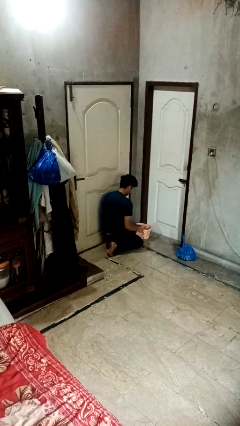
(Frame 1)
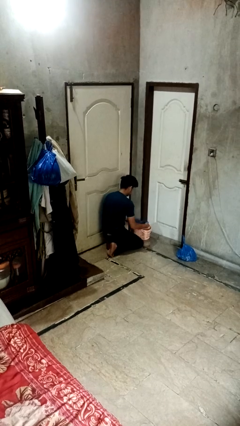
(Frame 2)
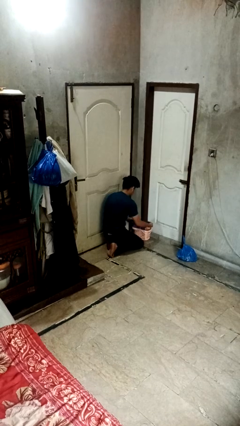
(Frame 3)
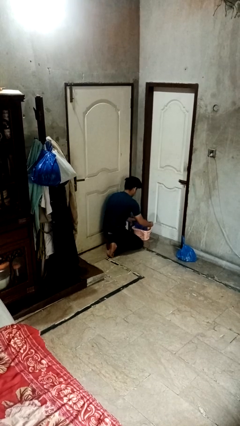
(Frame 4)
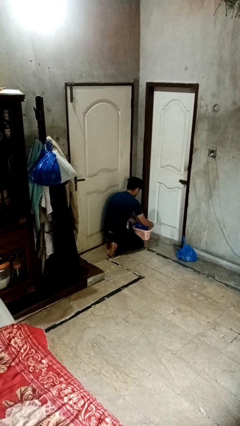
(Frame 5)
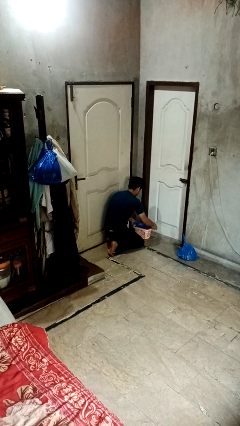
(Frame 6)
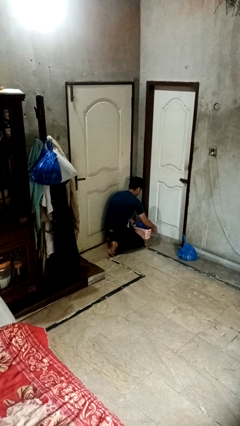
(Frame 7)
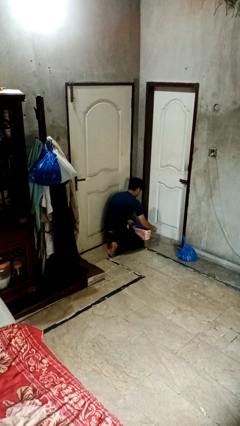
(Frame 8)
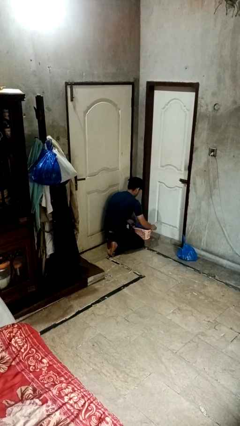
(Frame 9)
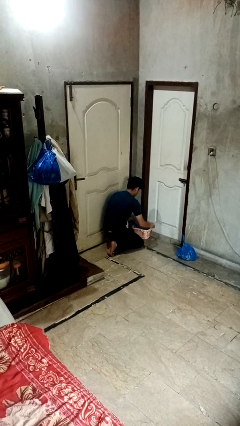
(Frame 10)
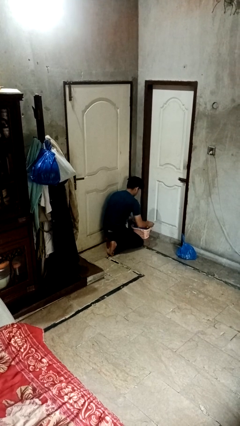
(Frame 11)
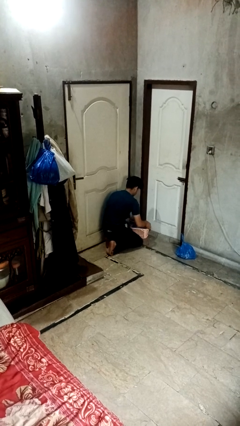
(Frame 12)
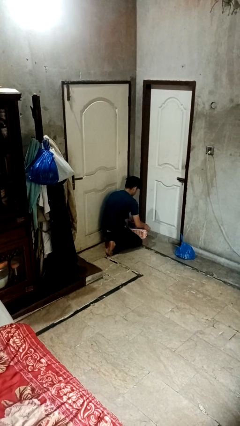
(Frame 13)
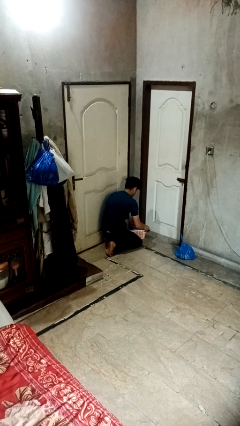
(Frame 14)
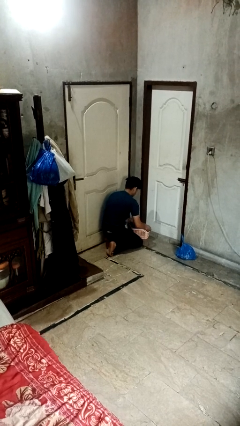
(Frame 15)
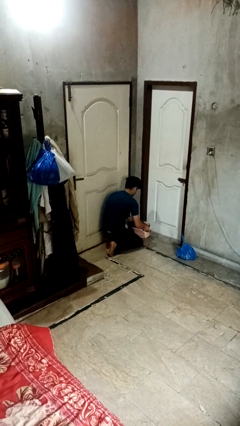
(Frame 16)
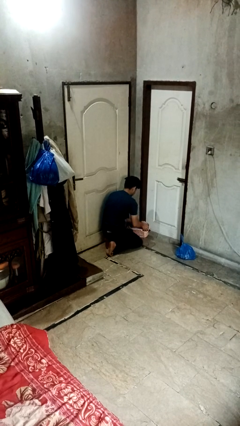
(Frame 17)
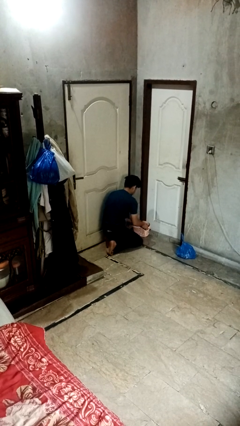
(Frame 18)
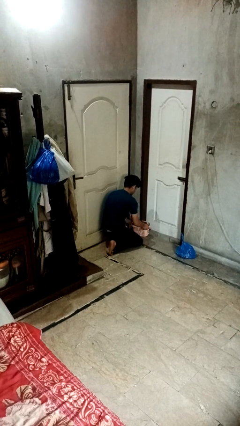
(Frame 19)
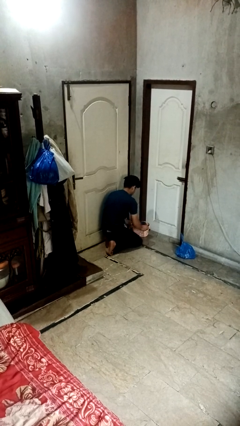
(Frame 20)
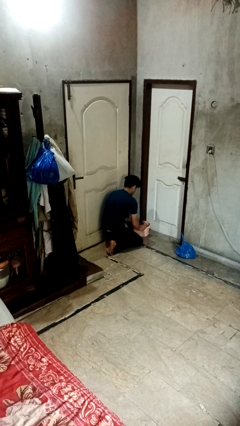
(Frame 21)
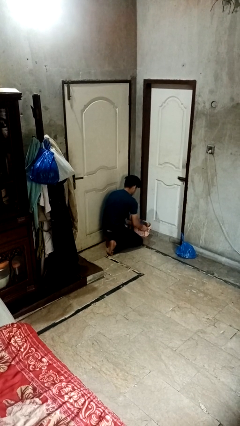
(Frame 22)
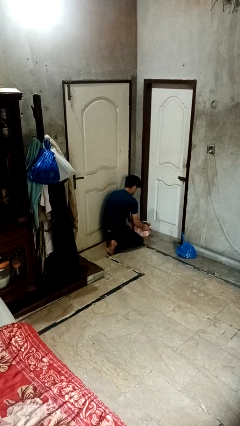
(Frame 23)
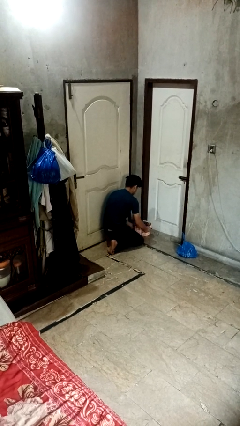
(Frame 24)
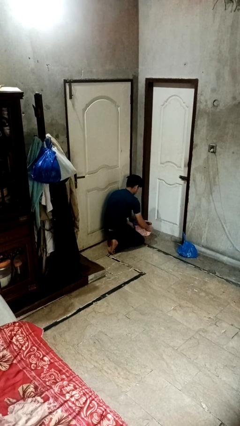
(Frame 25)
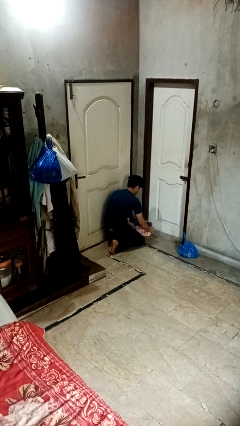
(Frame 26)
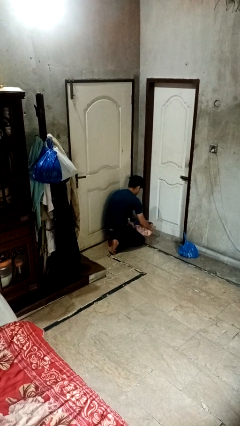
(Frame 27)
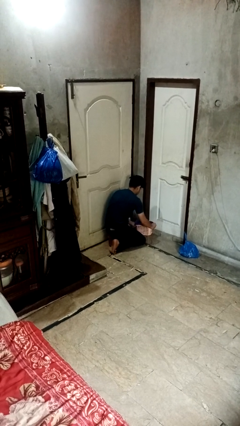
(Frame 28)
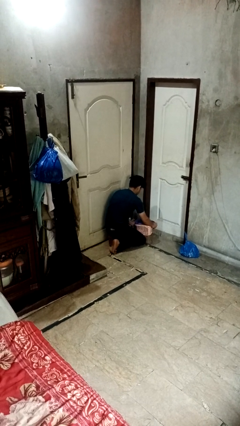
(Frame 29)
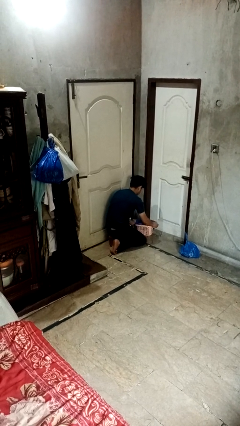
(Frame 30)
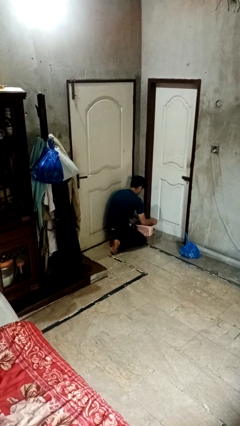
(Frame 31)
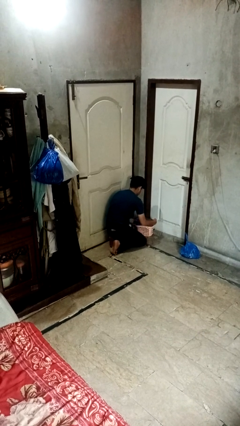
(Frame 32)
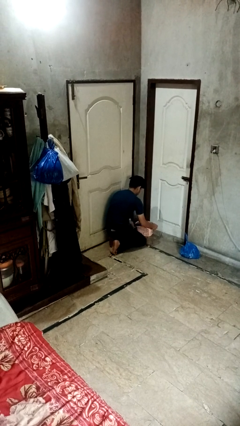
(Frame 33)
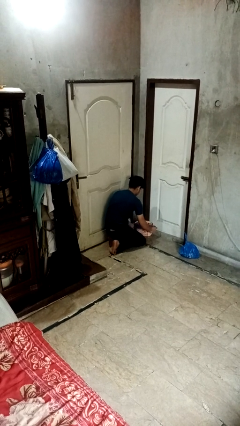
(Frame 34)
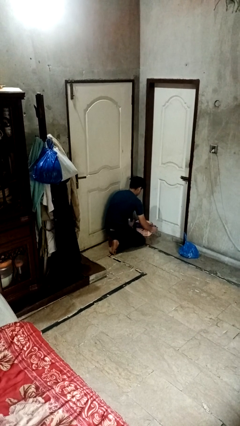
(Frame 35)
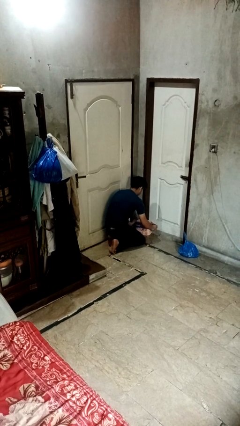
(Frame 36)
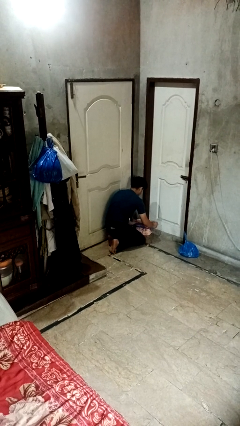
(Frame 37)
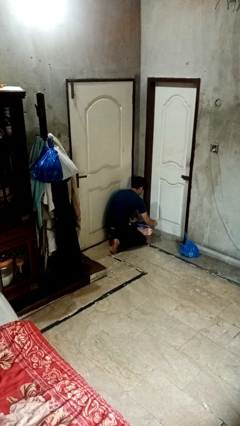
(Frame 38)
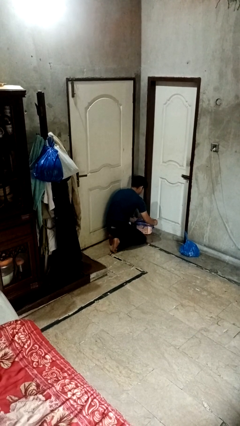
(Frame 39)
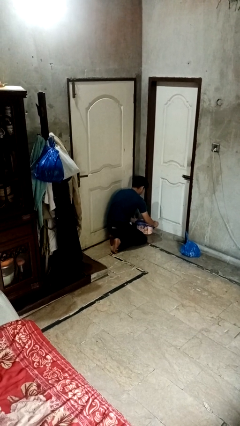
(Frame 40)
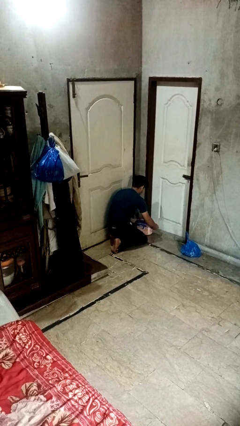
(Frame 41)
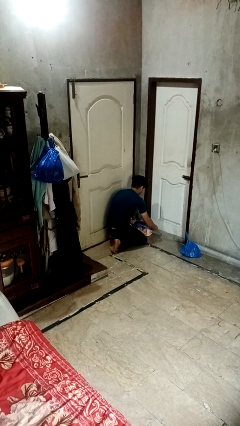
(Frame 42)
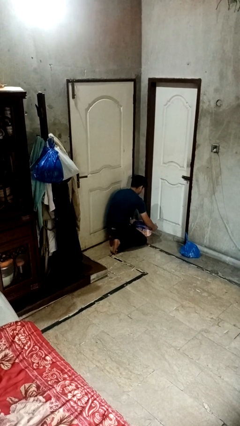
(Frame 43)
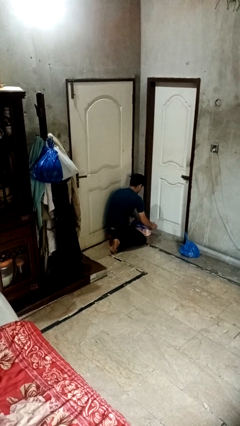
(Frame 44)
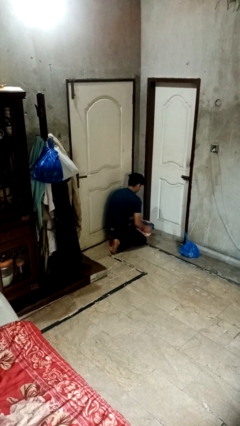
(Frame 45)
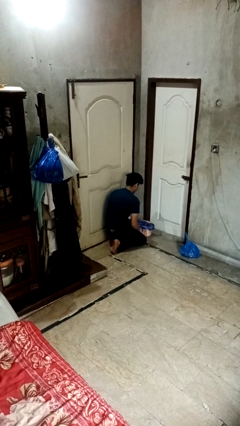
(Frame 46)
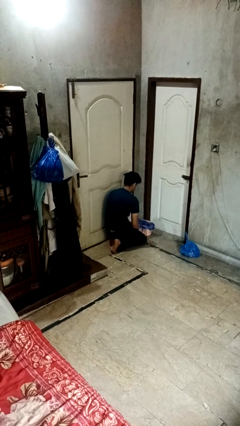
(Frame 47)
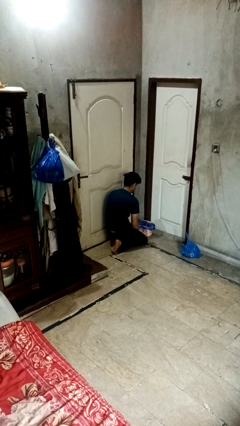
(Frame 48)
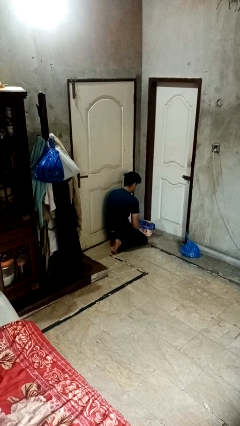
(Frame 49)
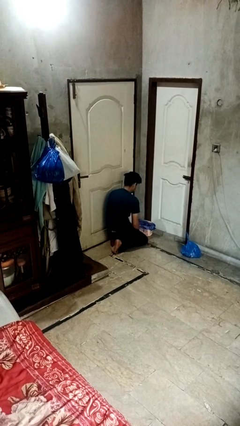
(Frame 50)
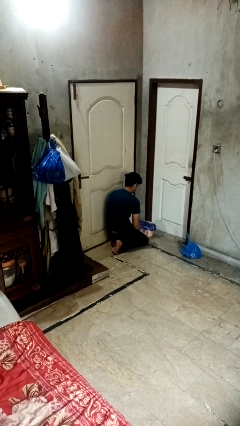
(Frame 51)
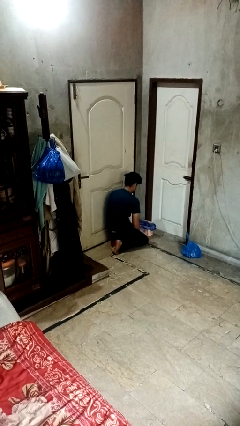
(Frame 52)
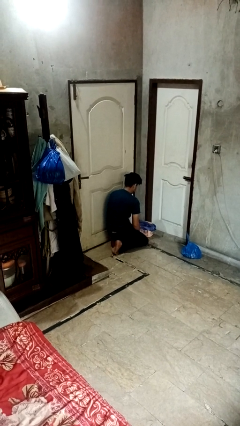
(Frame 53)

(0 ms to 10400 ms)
person inserts trashbag into trashcan

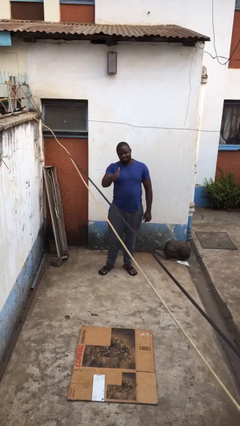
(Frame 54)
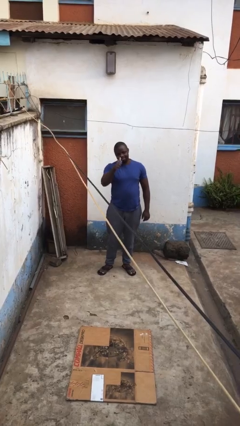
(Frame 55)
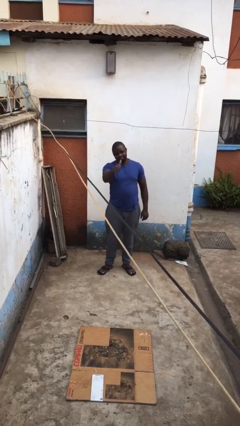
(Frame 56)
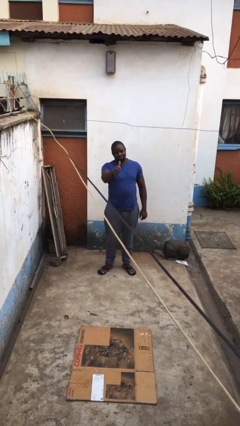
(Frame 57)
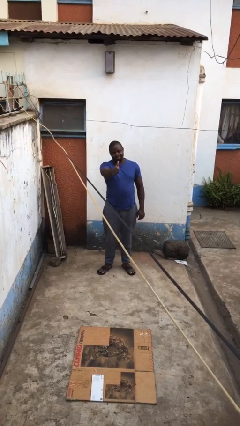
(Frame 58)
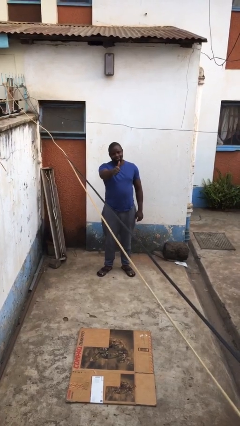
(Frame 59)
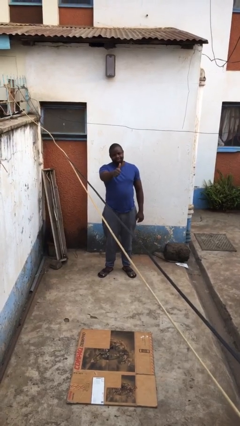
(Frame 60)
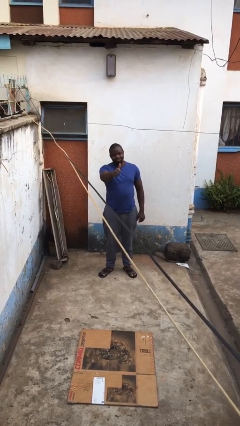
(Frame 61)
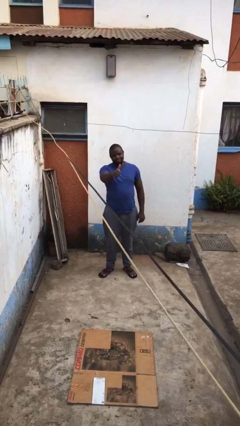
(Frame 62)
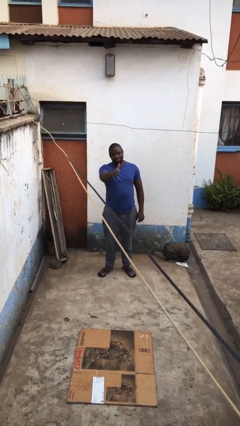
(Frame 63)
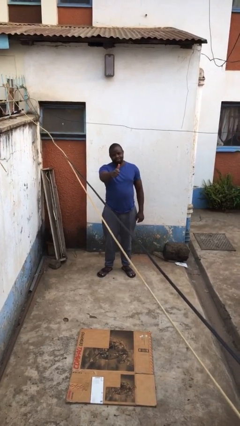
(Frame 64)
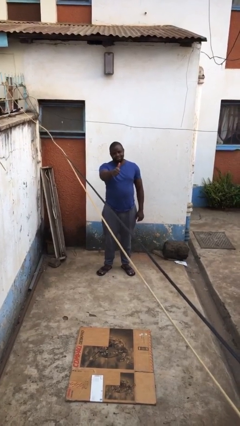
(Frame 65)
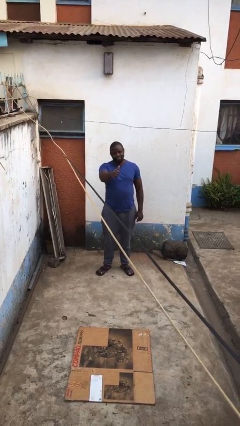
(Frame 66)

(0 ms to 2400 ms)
person gestures thumbs up

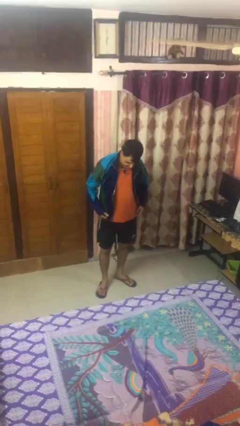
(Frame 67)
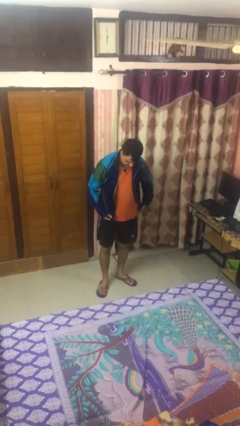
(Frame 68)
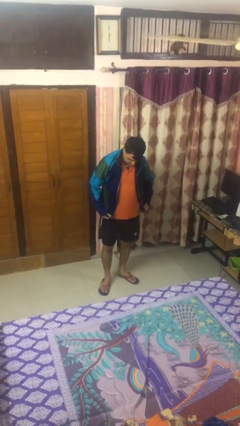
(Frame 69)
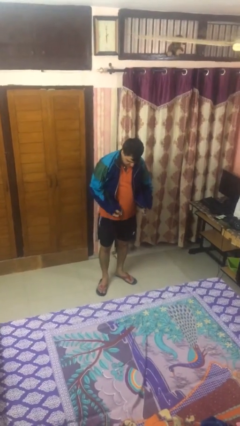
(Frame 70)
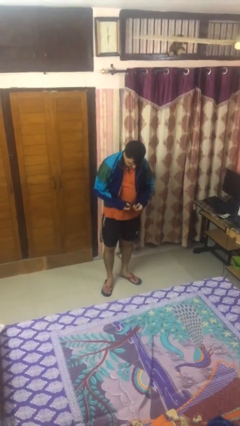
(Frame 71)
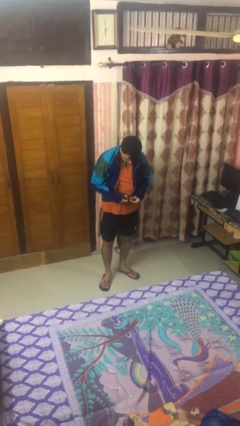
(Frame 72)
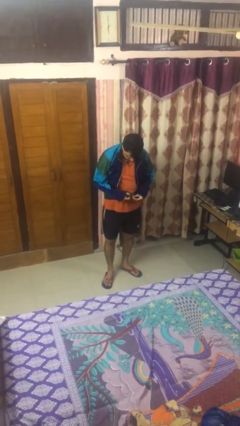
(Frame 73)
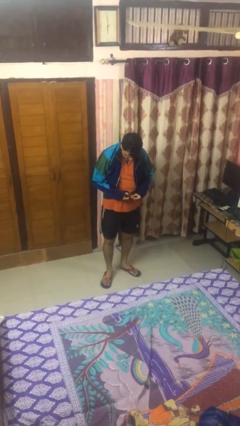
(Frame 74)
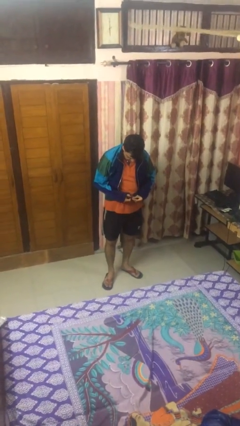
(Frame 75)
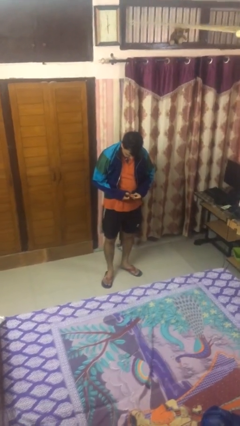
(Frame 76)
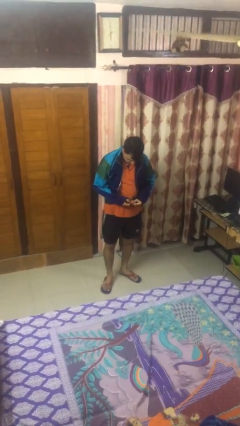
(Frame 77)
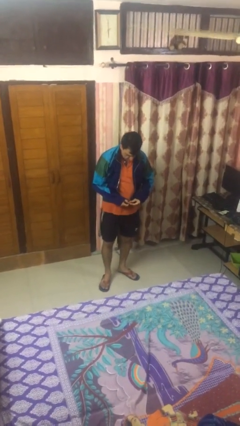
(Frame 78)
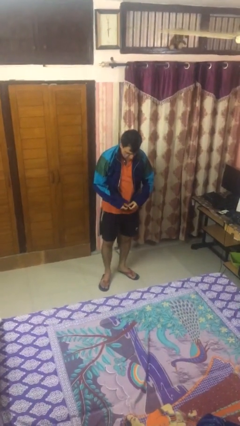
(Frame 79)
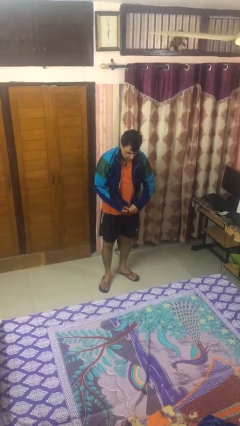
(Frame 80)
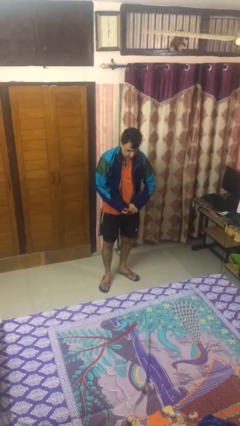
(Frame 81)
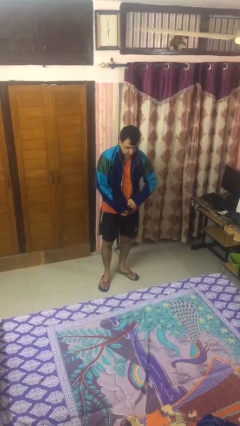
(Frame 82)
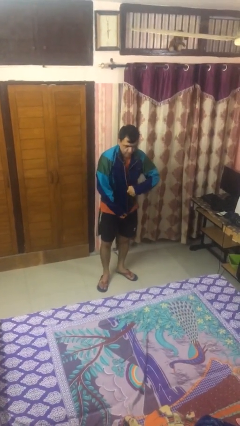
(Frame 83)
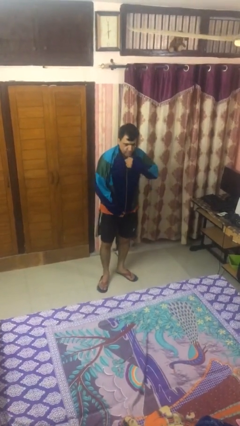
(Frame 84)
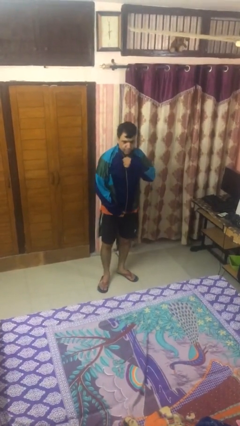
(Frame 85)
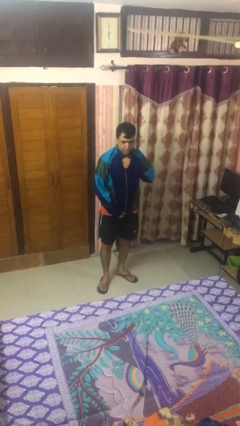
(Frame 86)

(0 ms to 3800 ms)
person zips up jacket

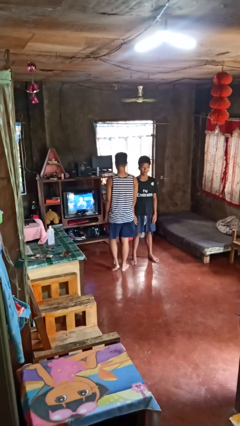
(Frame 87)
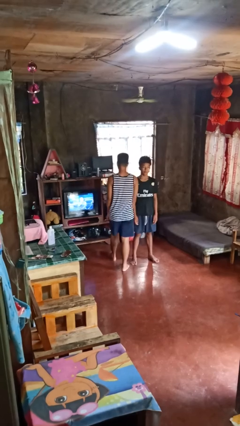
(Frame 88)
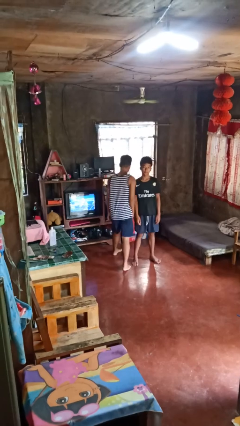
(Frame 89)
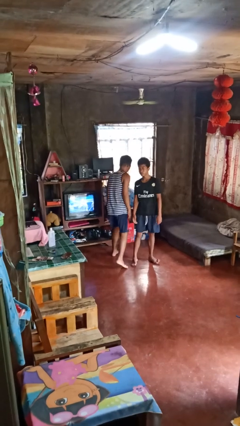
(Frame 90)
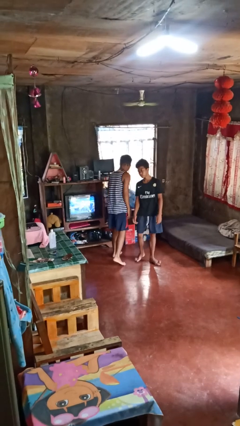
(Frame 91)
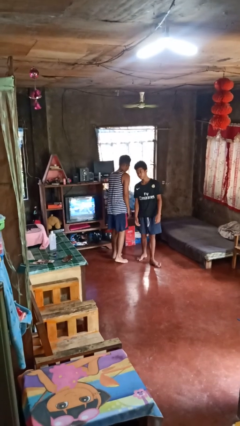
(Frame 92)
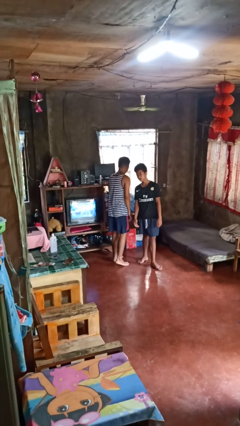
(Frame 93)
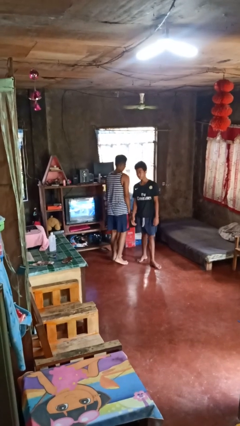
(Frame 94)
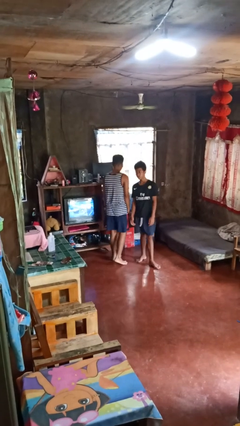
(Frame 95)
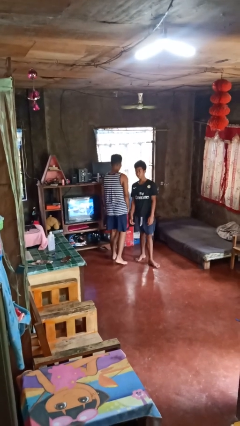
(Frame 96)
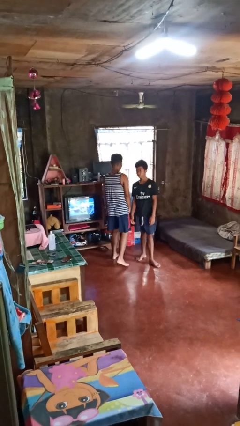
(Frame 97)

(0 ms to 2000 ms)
person bumps into person
